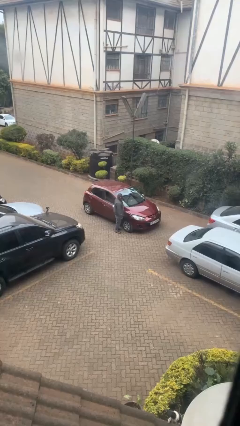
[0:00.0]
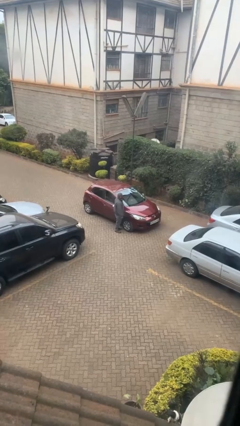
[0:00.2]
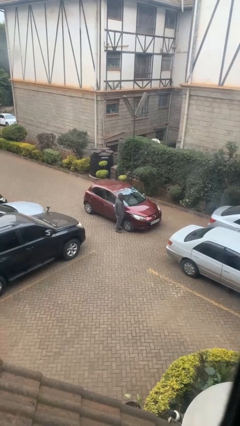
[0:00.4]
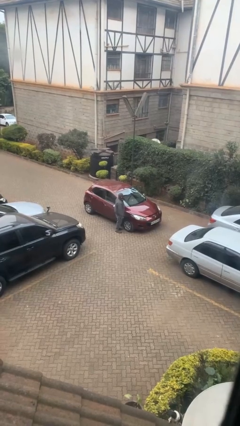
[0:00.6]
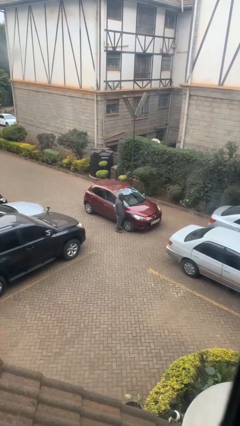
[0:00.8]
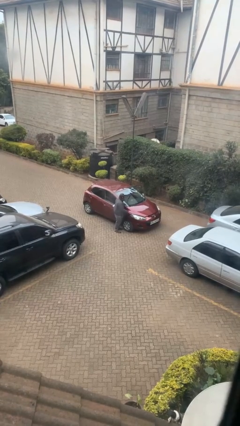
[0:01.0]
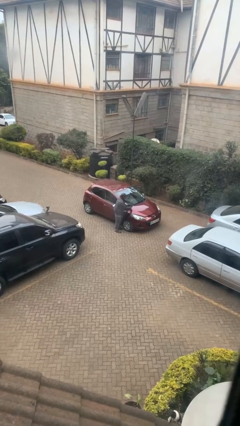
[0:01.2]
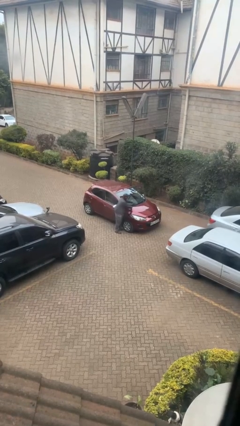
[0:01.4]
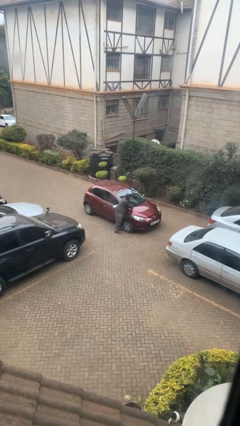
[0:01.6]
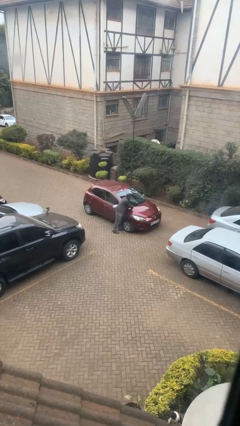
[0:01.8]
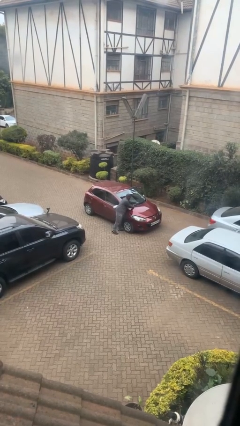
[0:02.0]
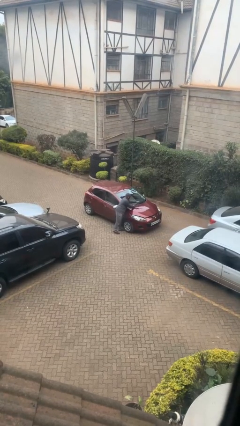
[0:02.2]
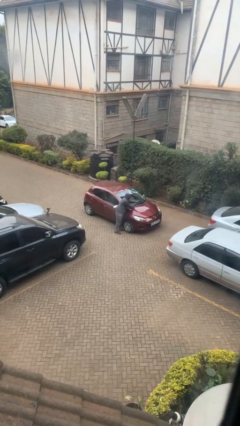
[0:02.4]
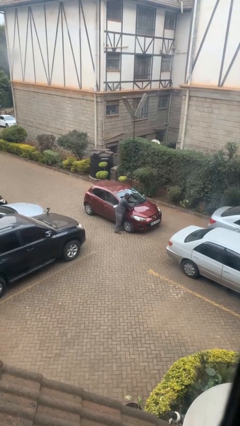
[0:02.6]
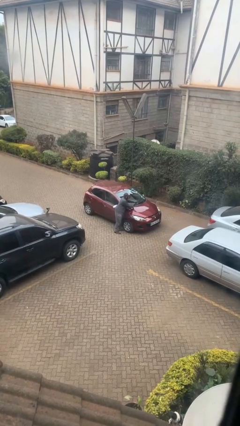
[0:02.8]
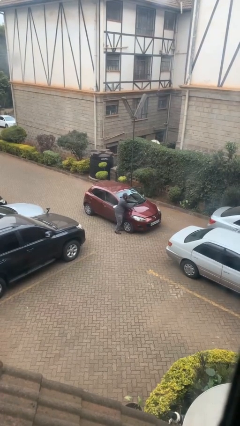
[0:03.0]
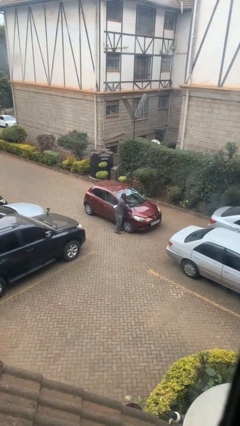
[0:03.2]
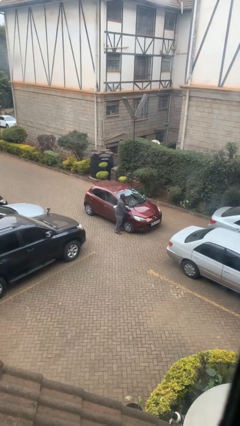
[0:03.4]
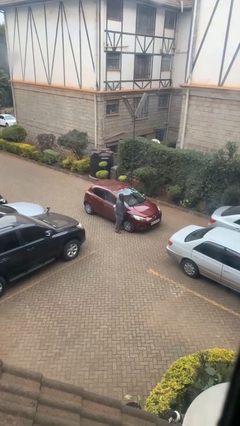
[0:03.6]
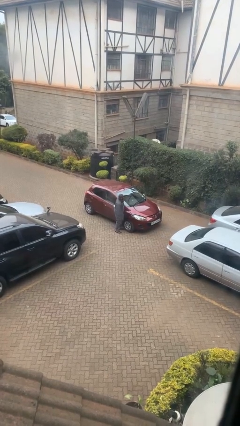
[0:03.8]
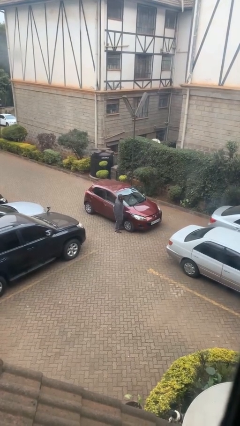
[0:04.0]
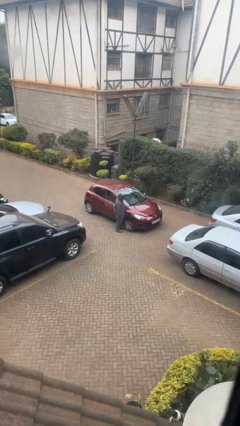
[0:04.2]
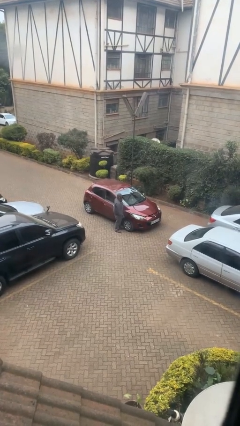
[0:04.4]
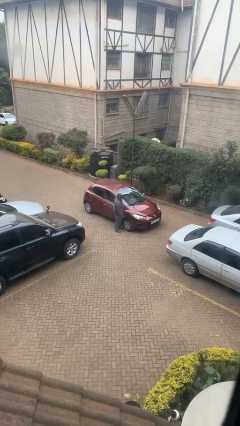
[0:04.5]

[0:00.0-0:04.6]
person flips up car wipers

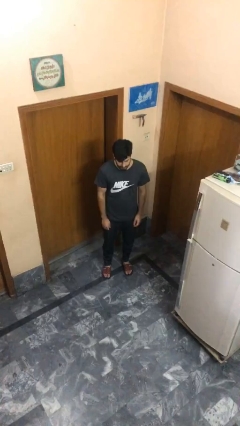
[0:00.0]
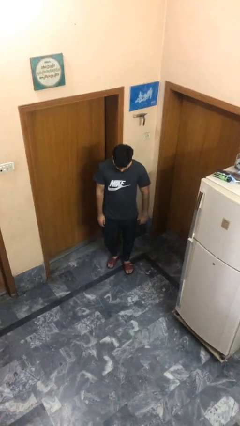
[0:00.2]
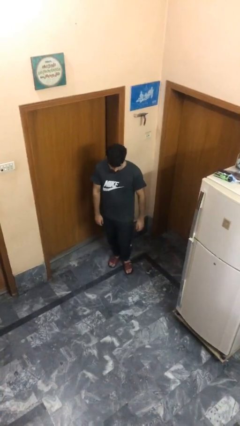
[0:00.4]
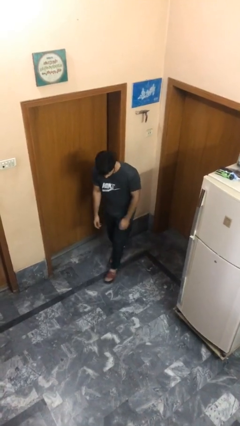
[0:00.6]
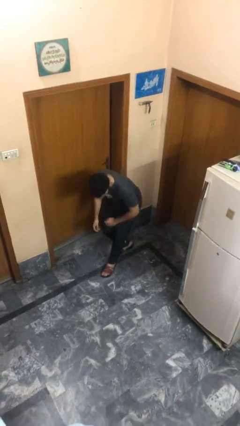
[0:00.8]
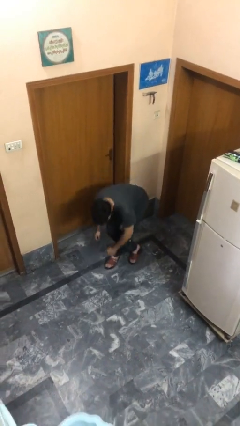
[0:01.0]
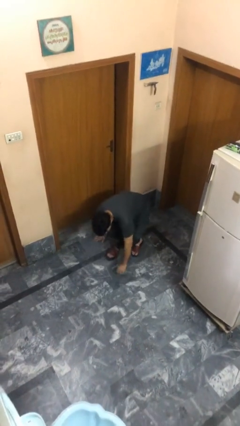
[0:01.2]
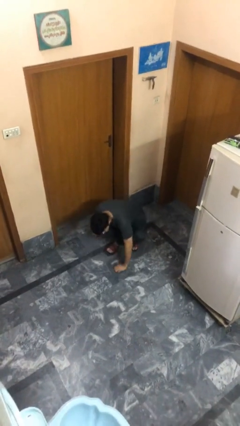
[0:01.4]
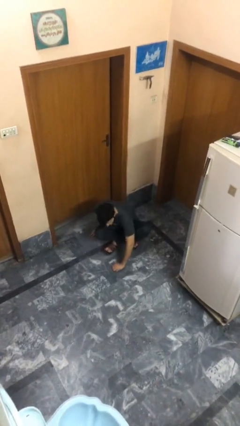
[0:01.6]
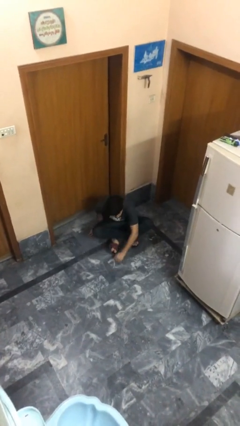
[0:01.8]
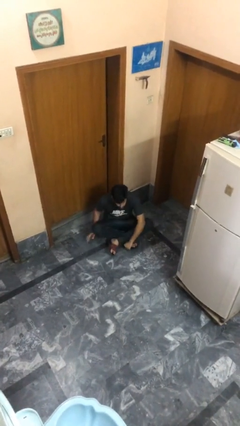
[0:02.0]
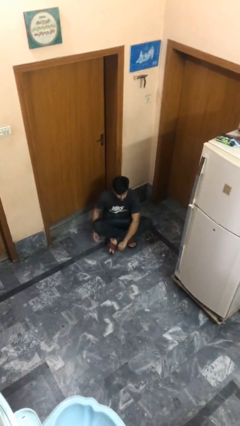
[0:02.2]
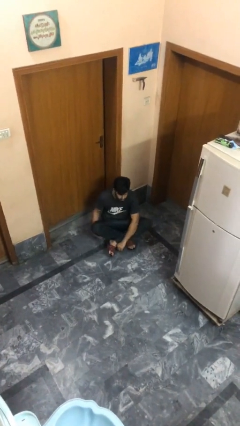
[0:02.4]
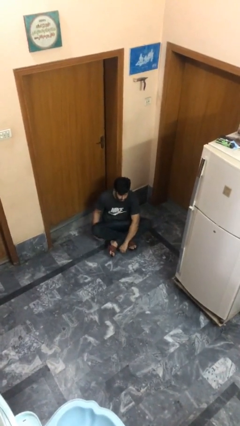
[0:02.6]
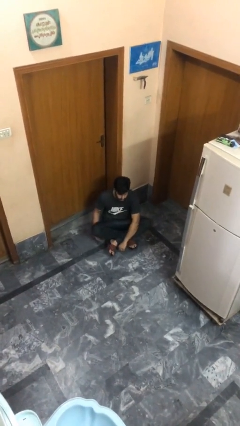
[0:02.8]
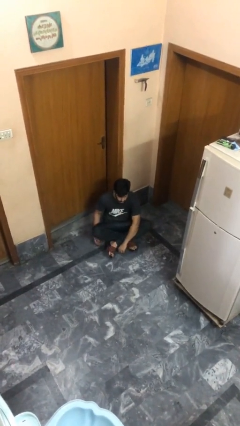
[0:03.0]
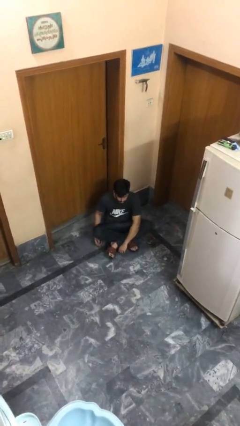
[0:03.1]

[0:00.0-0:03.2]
person sits crisscross

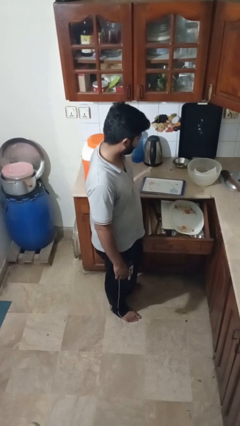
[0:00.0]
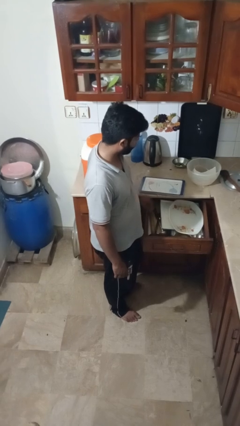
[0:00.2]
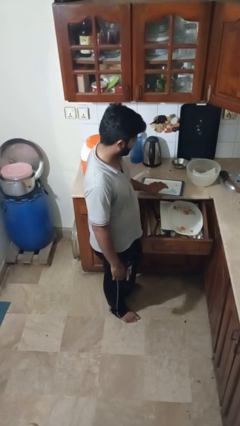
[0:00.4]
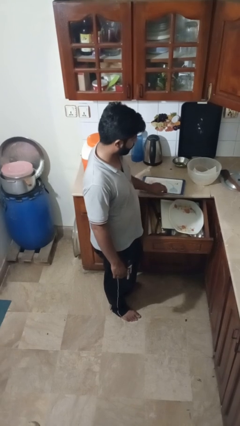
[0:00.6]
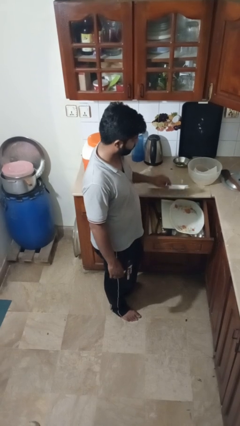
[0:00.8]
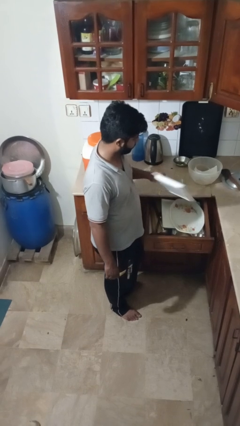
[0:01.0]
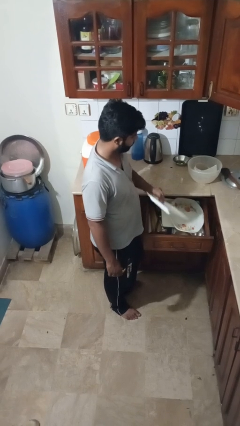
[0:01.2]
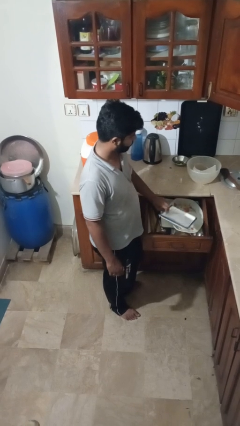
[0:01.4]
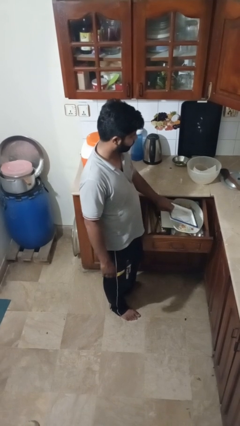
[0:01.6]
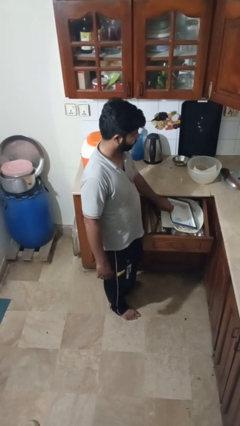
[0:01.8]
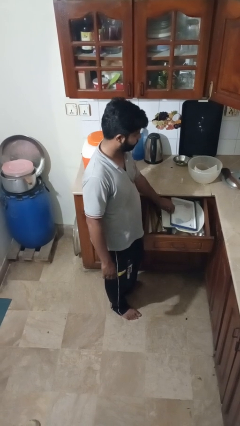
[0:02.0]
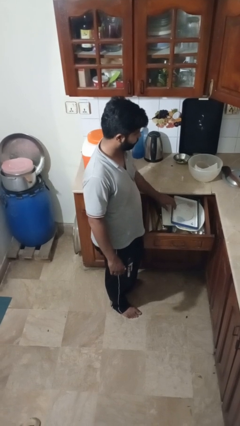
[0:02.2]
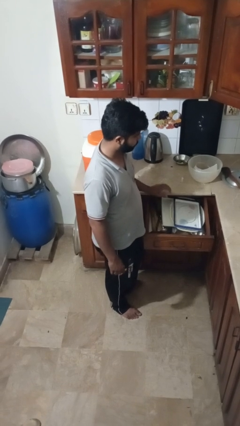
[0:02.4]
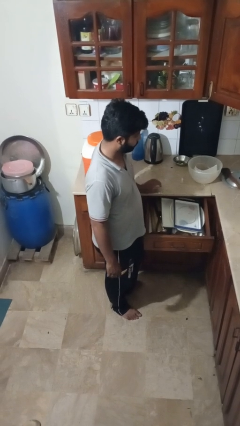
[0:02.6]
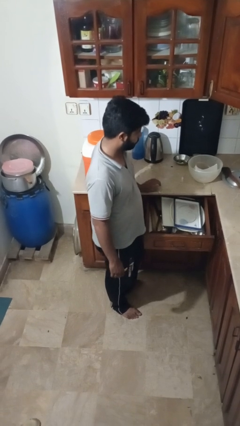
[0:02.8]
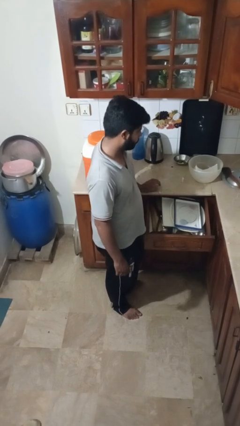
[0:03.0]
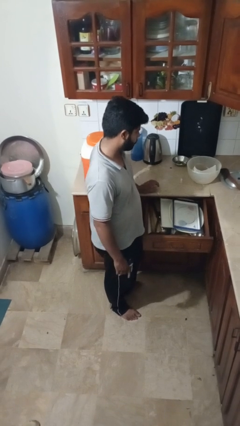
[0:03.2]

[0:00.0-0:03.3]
person puts object into kitchen drawer

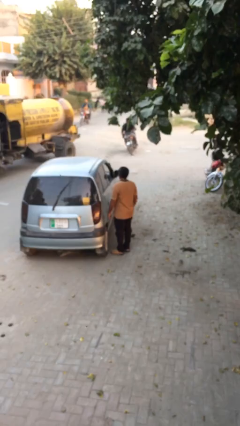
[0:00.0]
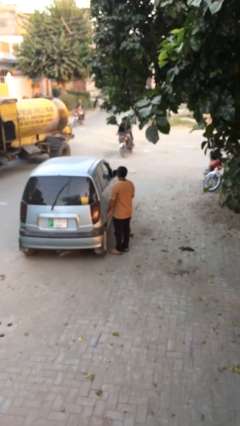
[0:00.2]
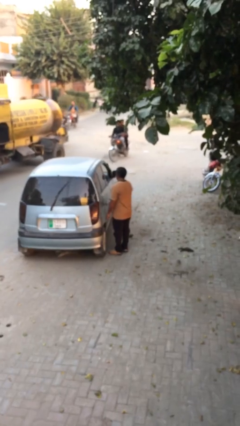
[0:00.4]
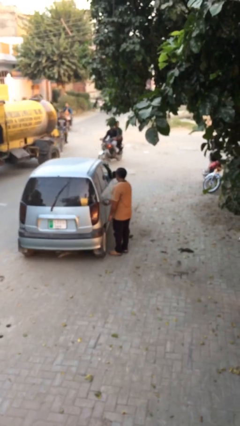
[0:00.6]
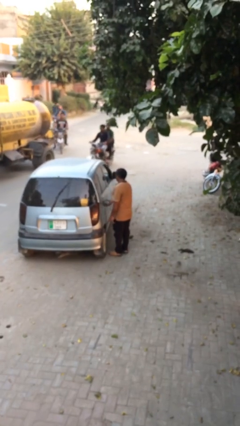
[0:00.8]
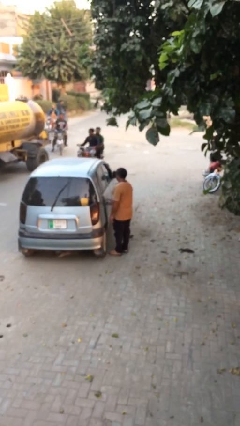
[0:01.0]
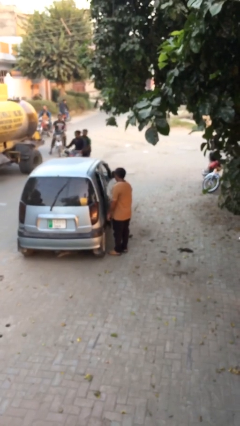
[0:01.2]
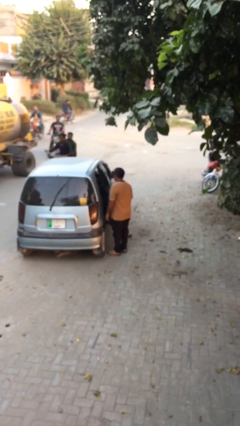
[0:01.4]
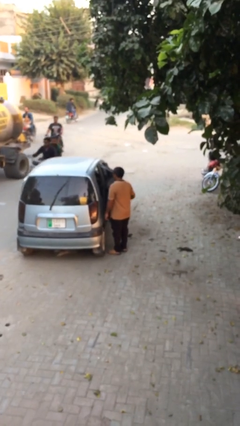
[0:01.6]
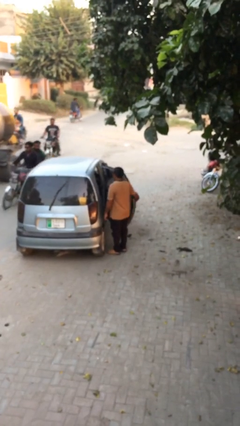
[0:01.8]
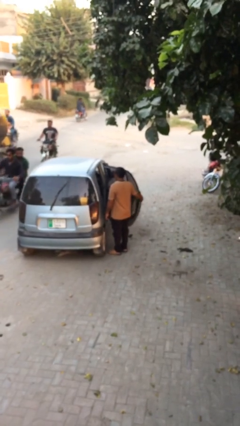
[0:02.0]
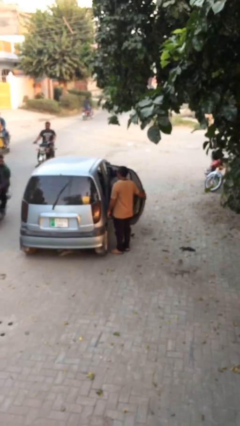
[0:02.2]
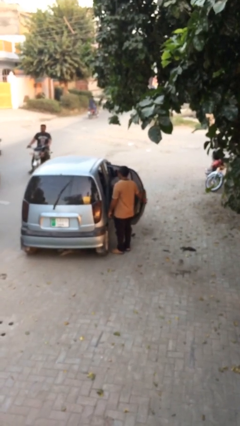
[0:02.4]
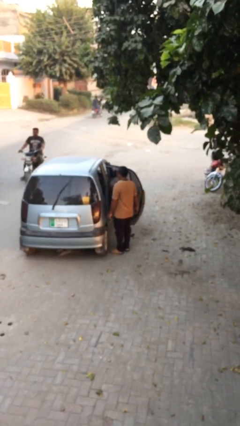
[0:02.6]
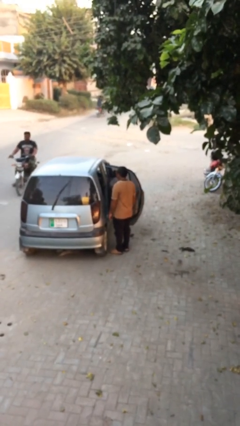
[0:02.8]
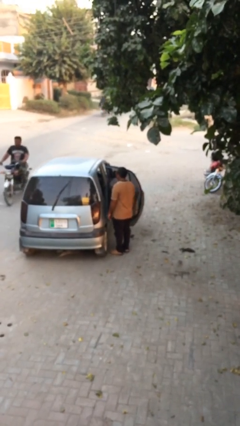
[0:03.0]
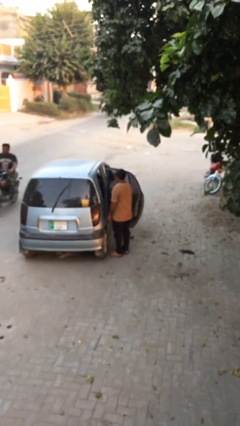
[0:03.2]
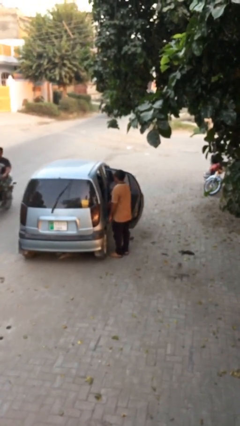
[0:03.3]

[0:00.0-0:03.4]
person opens car door

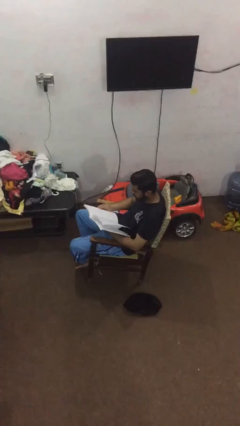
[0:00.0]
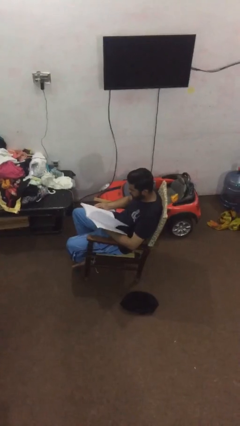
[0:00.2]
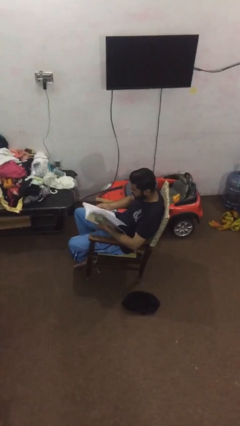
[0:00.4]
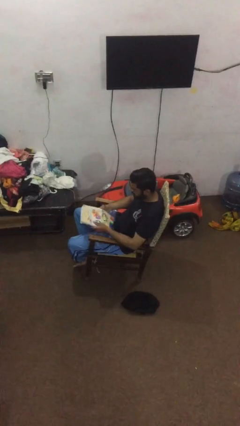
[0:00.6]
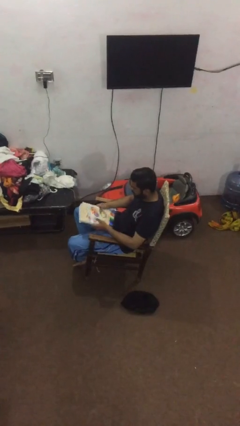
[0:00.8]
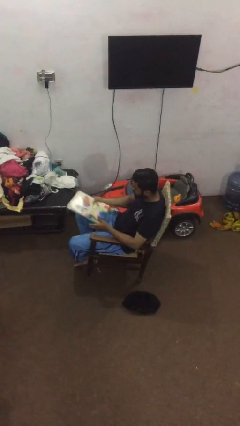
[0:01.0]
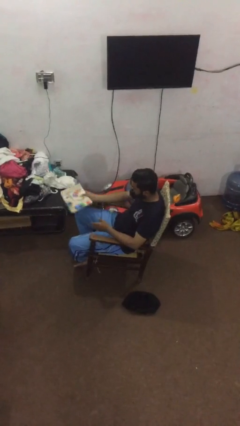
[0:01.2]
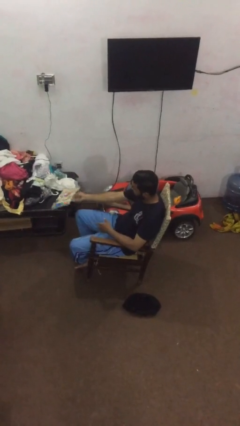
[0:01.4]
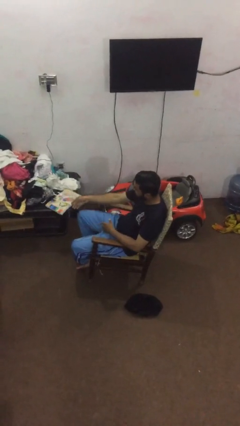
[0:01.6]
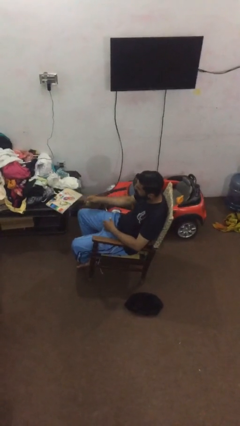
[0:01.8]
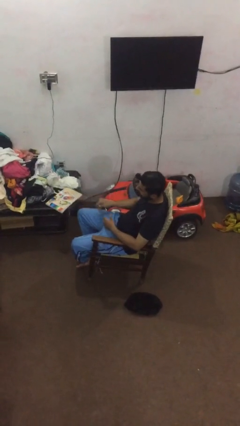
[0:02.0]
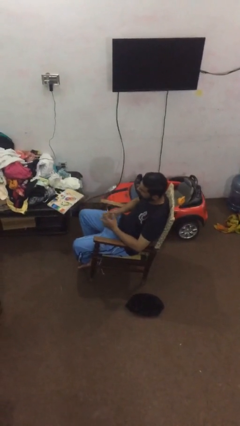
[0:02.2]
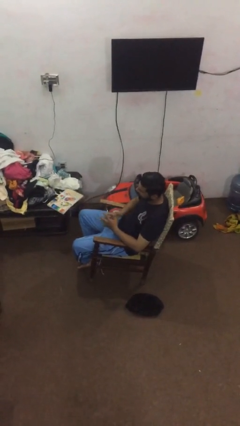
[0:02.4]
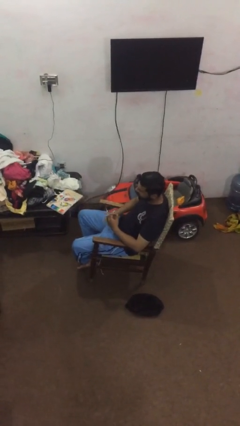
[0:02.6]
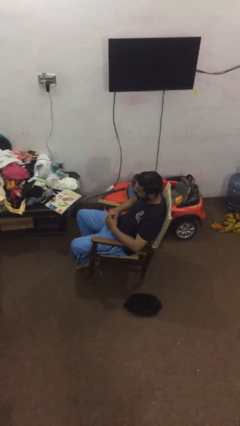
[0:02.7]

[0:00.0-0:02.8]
person puts down object on table

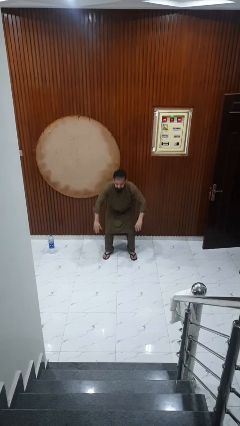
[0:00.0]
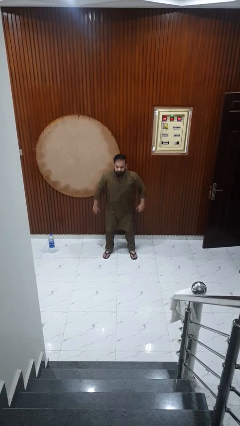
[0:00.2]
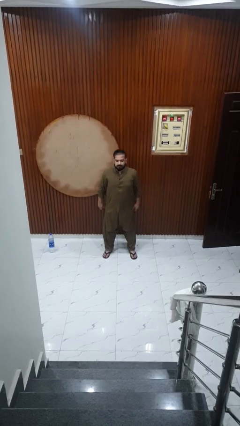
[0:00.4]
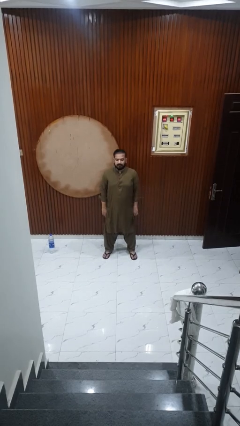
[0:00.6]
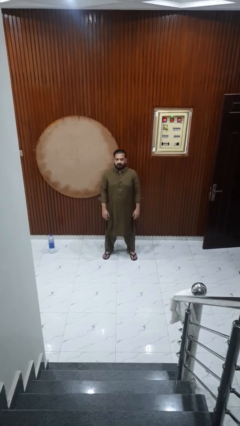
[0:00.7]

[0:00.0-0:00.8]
person stands up
